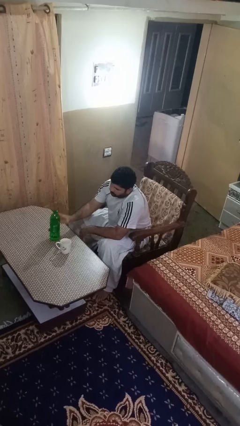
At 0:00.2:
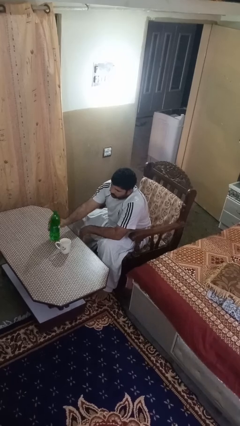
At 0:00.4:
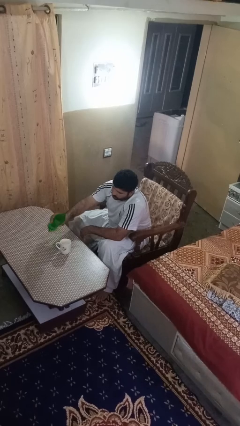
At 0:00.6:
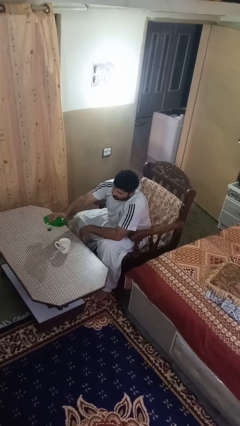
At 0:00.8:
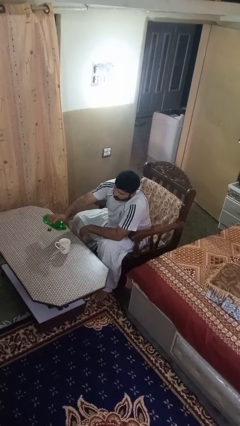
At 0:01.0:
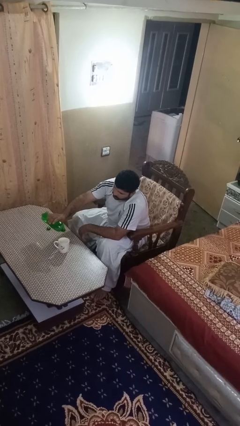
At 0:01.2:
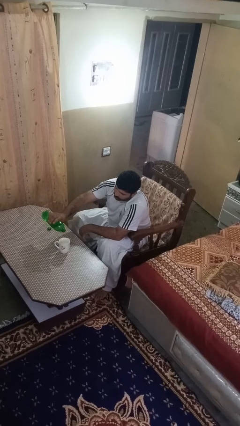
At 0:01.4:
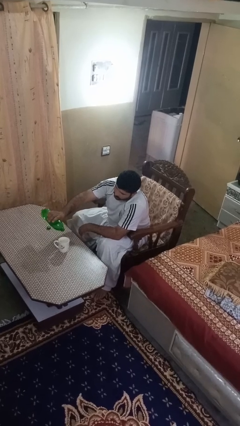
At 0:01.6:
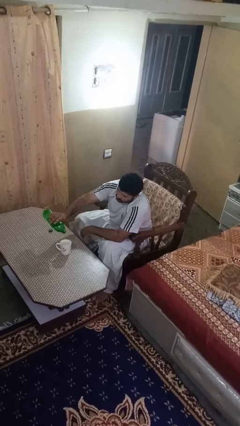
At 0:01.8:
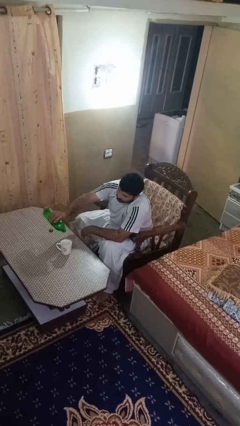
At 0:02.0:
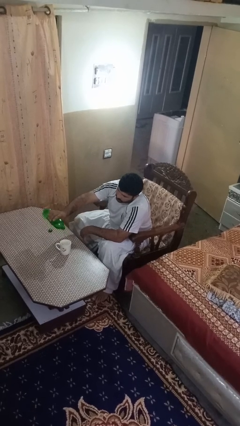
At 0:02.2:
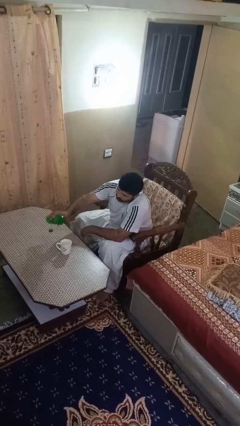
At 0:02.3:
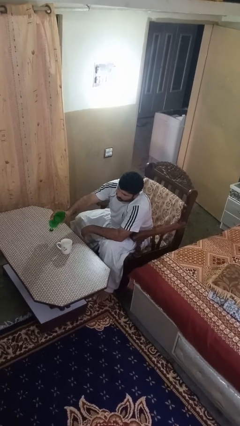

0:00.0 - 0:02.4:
person pours liquid into cup

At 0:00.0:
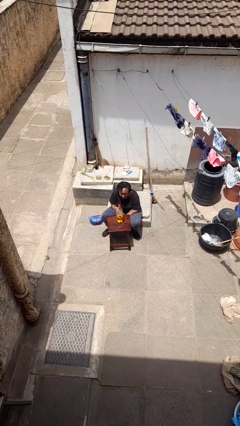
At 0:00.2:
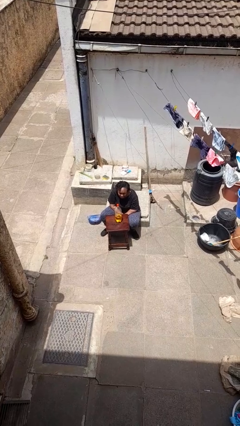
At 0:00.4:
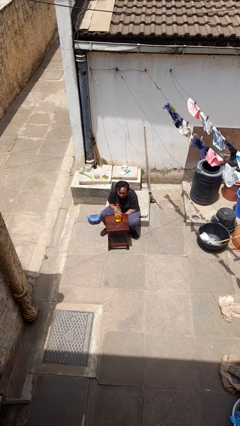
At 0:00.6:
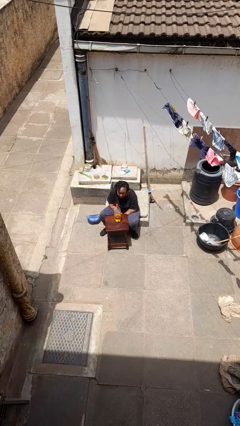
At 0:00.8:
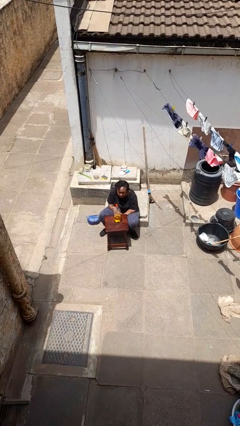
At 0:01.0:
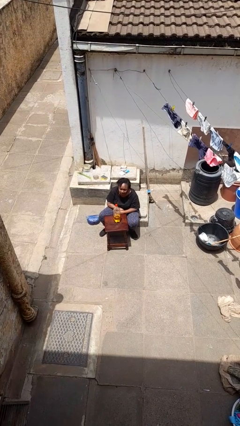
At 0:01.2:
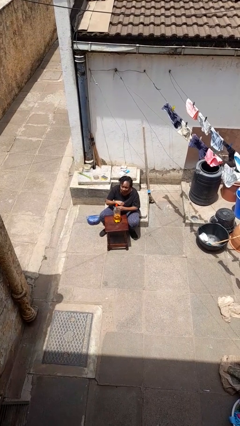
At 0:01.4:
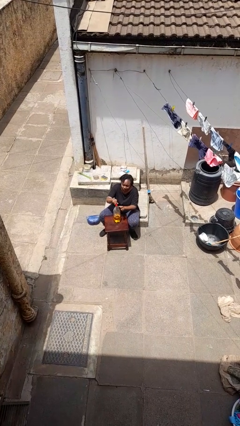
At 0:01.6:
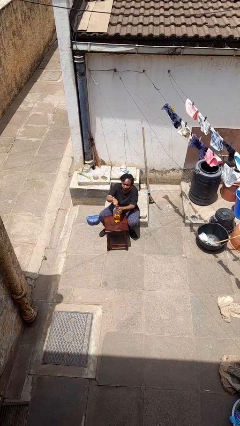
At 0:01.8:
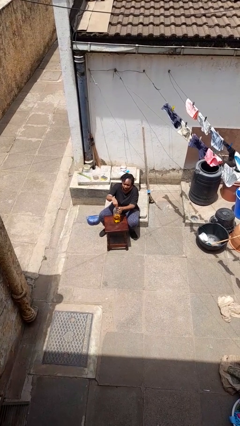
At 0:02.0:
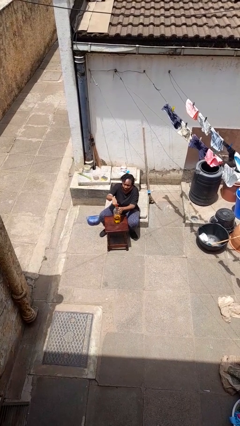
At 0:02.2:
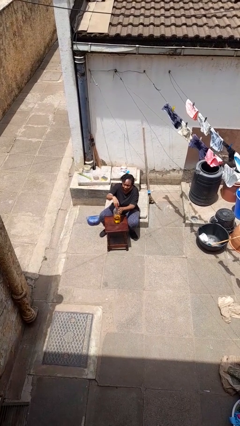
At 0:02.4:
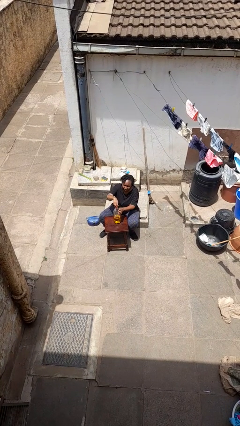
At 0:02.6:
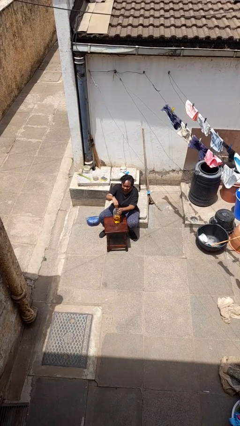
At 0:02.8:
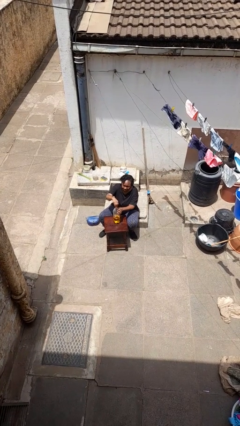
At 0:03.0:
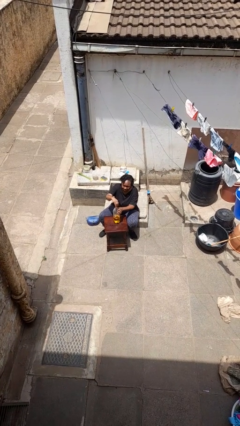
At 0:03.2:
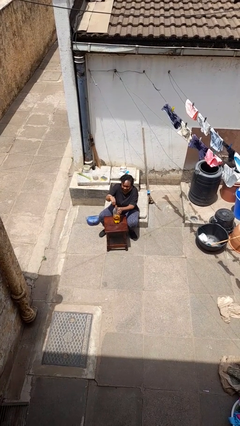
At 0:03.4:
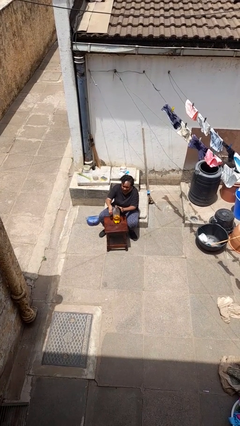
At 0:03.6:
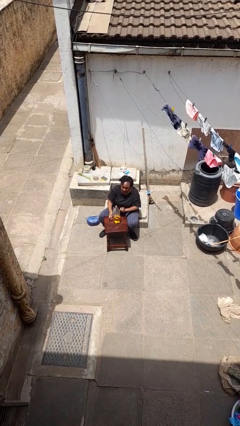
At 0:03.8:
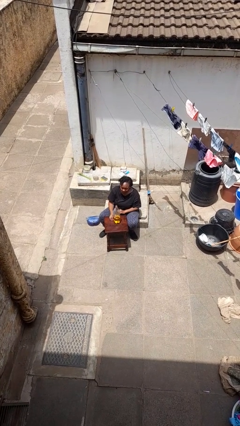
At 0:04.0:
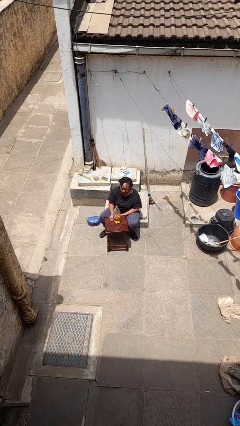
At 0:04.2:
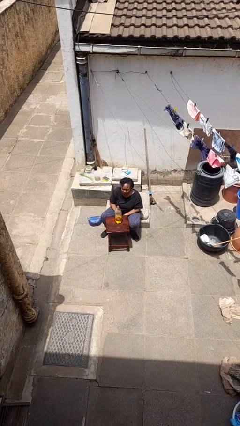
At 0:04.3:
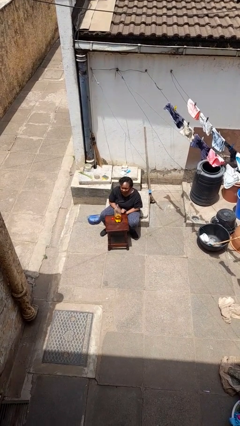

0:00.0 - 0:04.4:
person unscrews lid from bottle

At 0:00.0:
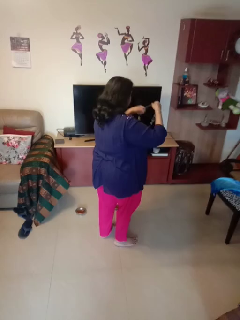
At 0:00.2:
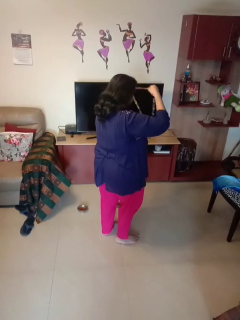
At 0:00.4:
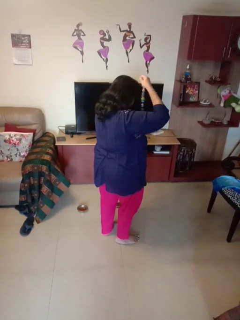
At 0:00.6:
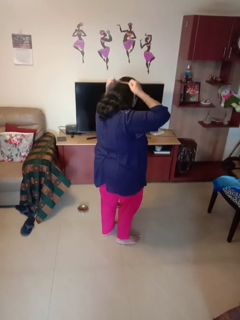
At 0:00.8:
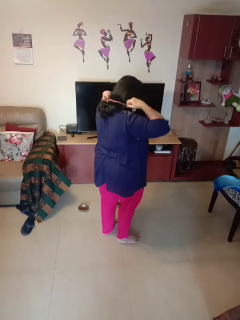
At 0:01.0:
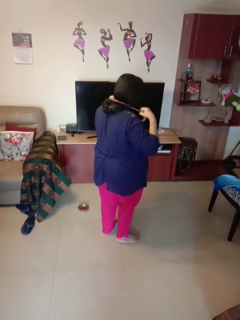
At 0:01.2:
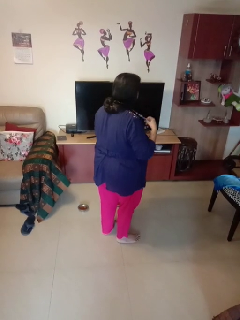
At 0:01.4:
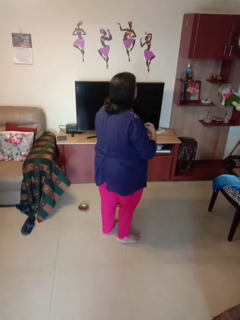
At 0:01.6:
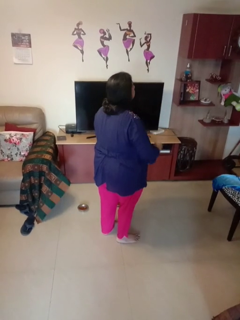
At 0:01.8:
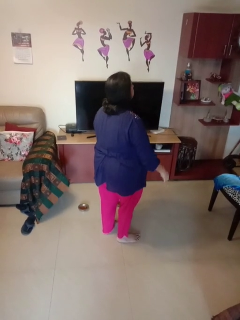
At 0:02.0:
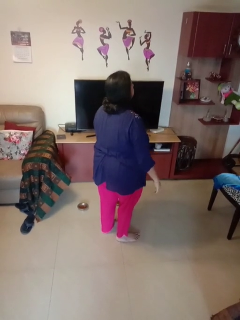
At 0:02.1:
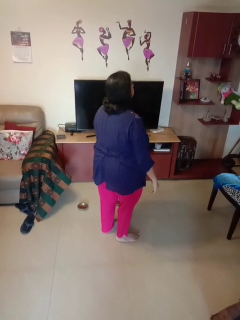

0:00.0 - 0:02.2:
person puts on necklace

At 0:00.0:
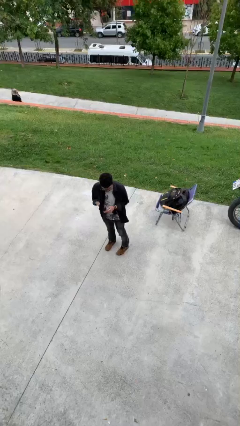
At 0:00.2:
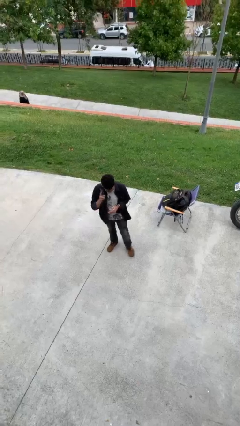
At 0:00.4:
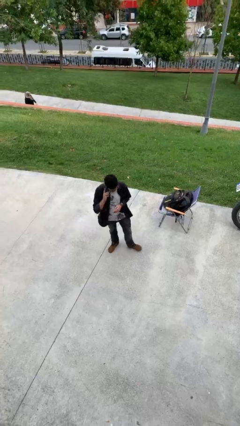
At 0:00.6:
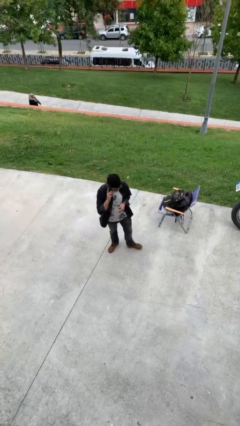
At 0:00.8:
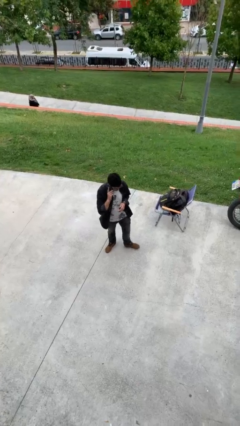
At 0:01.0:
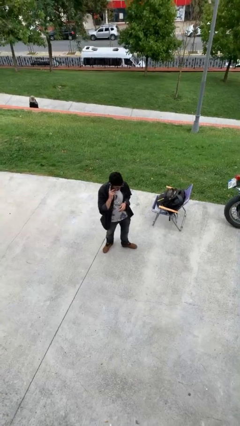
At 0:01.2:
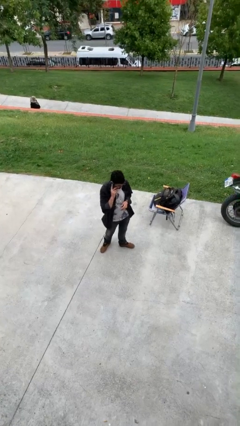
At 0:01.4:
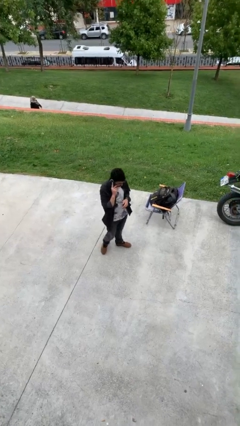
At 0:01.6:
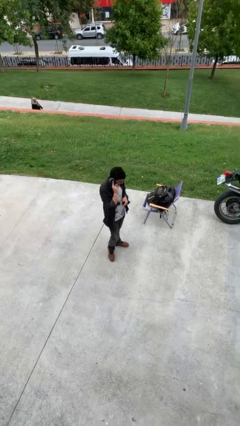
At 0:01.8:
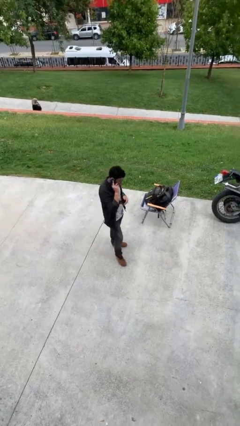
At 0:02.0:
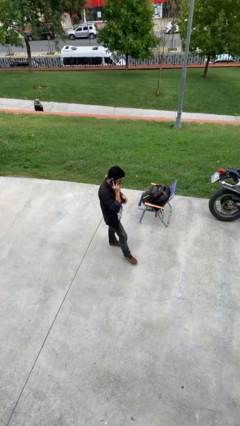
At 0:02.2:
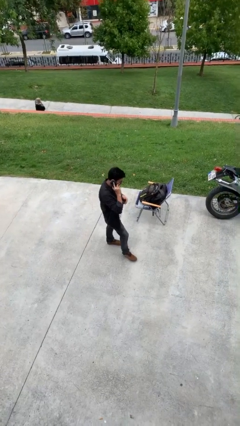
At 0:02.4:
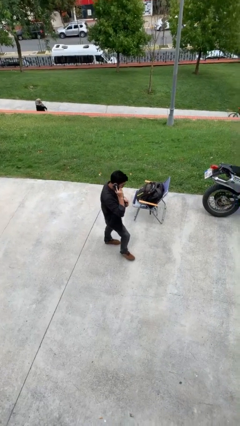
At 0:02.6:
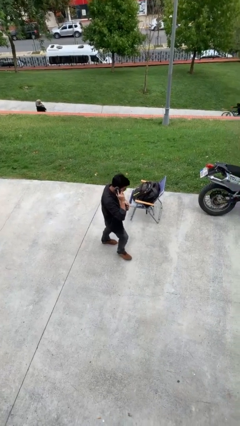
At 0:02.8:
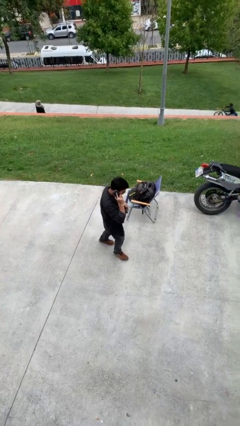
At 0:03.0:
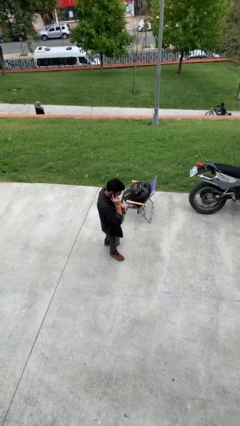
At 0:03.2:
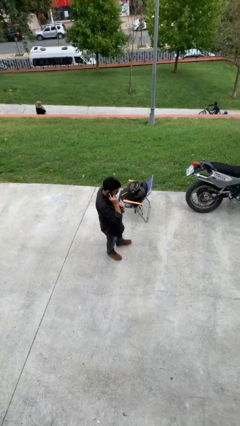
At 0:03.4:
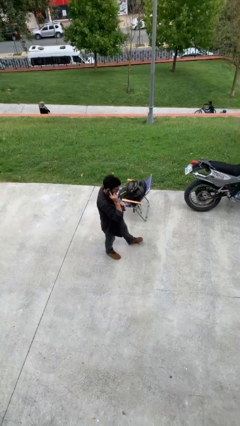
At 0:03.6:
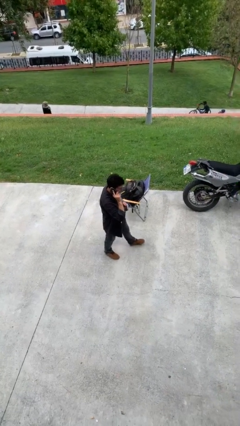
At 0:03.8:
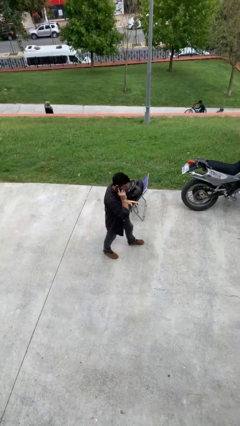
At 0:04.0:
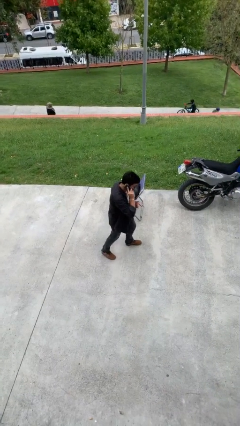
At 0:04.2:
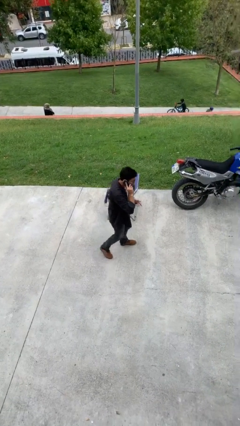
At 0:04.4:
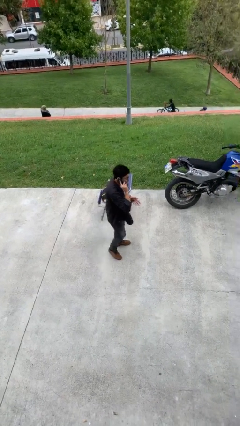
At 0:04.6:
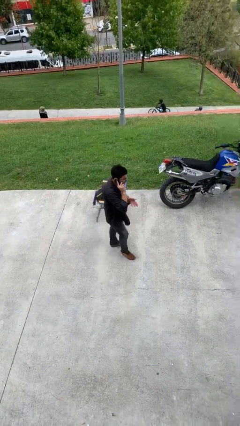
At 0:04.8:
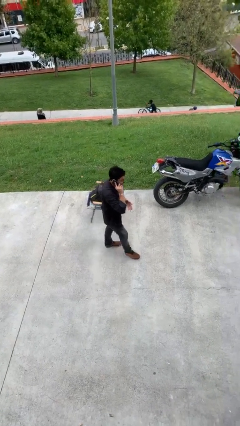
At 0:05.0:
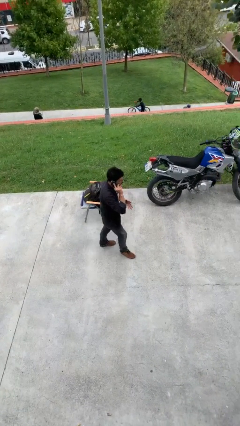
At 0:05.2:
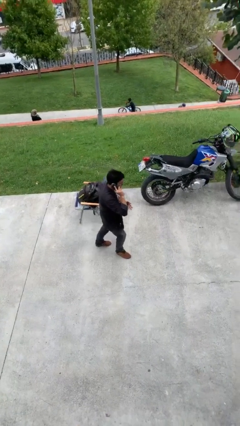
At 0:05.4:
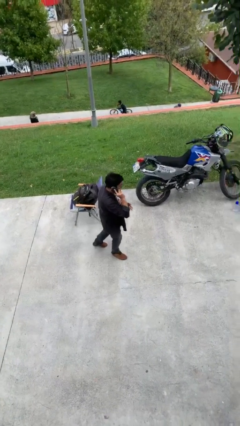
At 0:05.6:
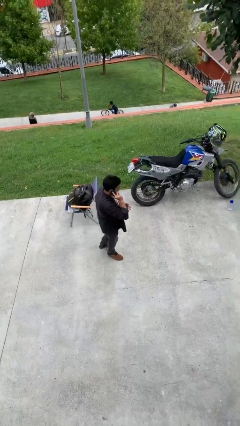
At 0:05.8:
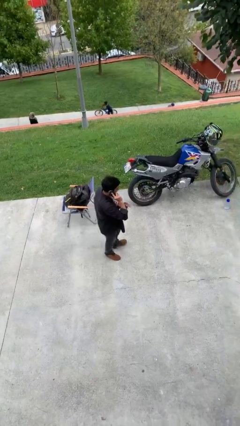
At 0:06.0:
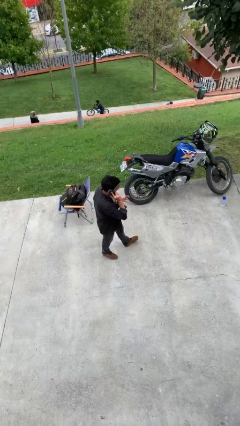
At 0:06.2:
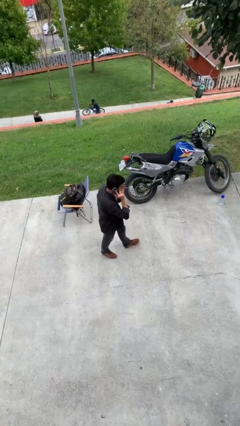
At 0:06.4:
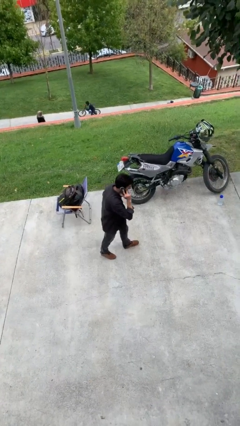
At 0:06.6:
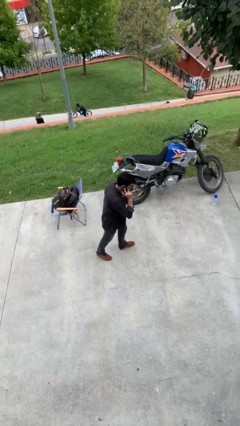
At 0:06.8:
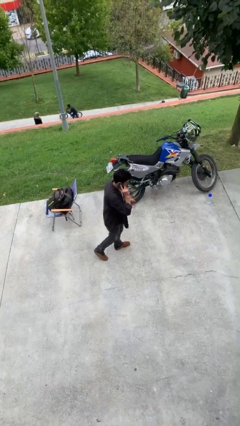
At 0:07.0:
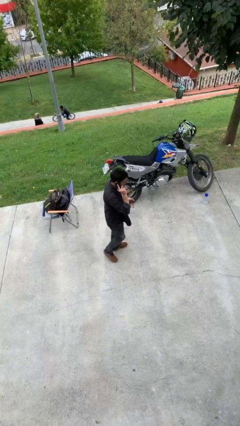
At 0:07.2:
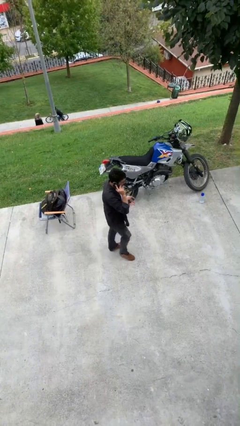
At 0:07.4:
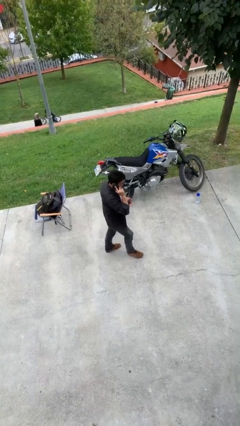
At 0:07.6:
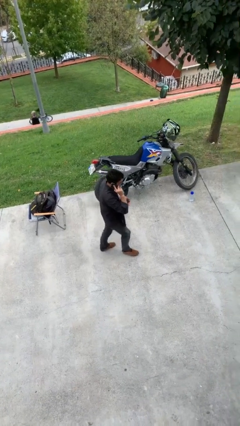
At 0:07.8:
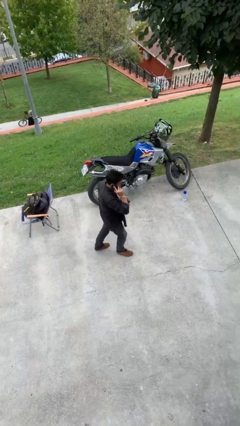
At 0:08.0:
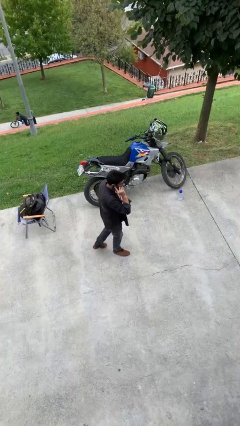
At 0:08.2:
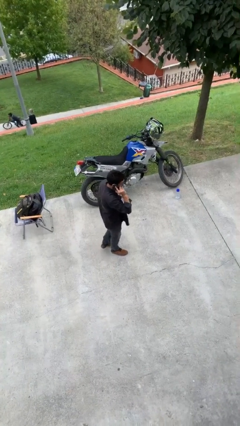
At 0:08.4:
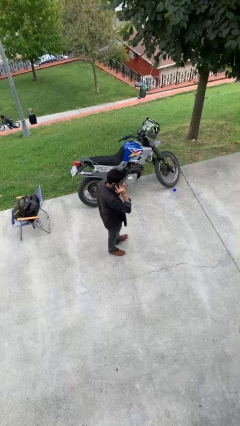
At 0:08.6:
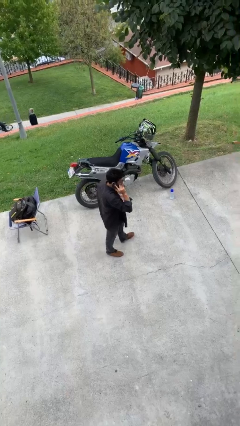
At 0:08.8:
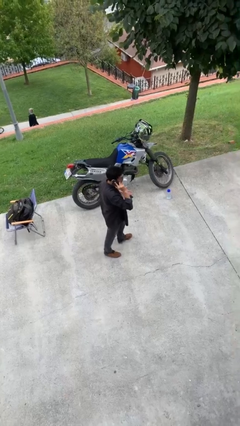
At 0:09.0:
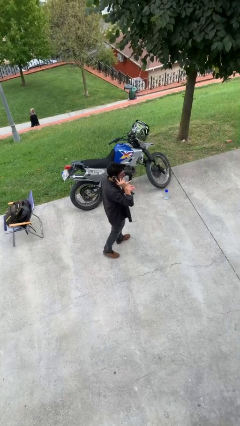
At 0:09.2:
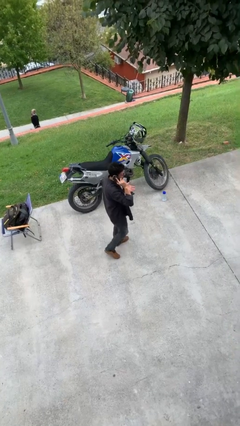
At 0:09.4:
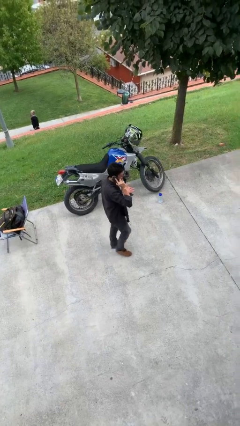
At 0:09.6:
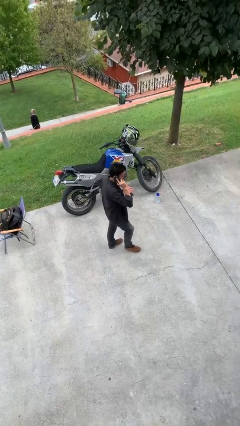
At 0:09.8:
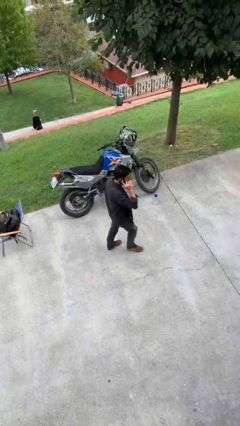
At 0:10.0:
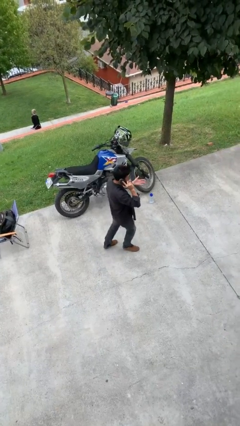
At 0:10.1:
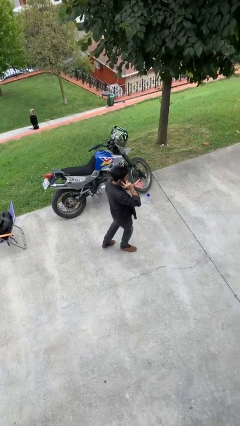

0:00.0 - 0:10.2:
person talks on phone
